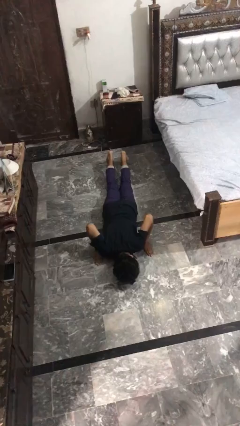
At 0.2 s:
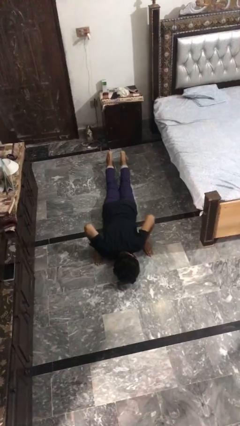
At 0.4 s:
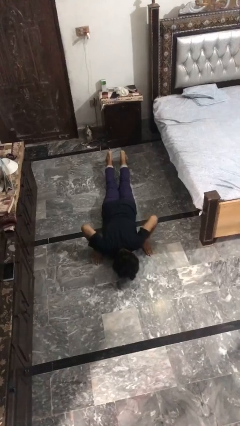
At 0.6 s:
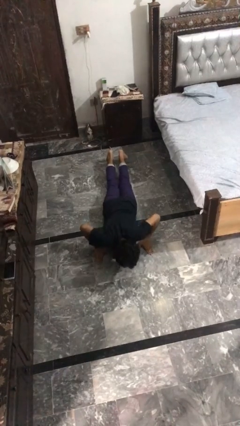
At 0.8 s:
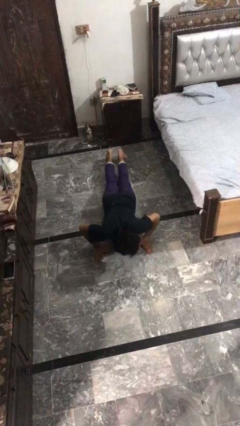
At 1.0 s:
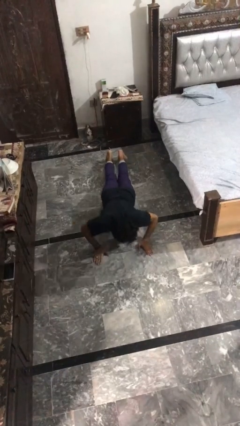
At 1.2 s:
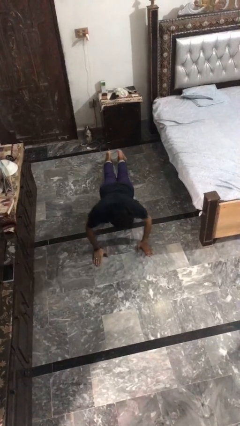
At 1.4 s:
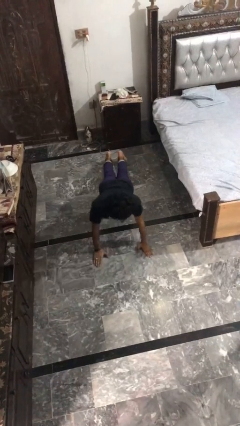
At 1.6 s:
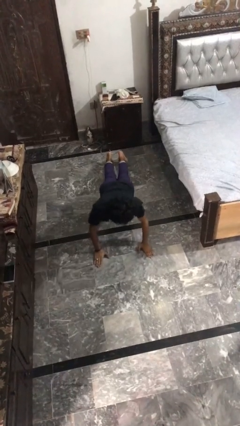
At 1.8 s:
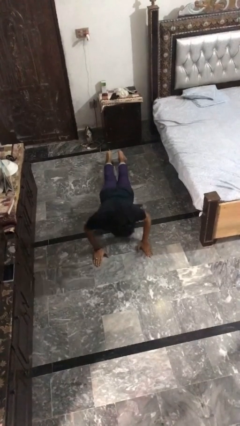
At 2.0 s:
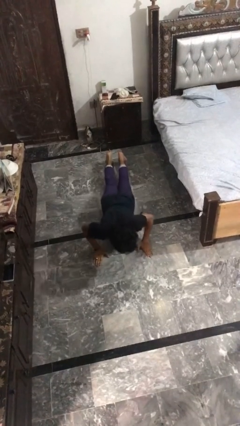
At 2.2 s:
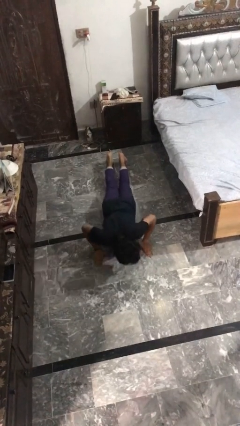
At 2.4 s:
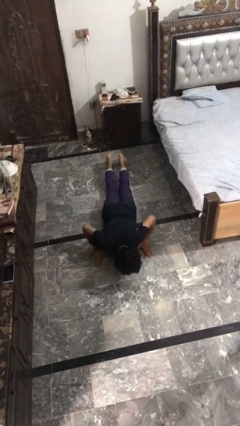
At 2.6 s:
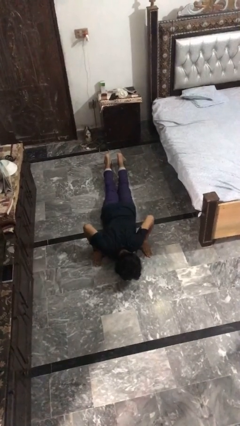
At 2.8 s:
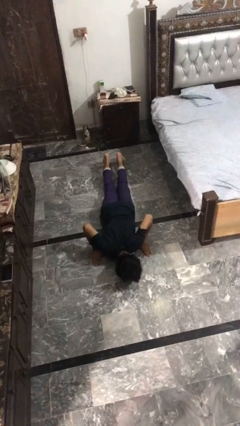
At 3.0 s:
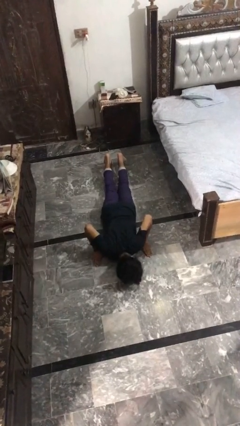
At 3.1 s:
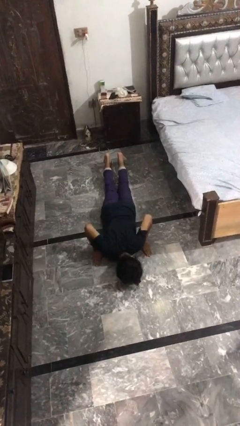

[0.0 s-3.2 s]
person exercises with pushup

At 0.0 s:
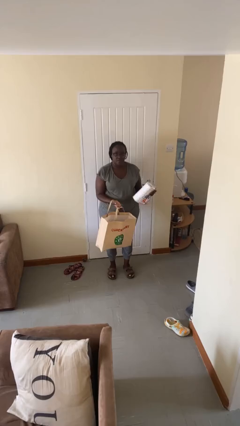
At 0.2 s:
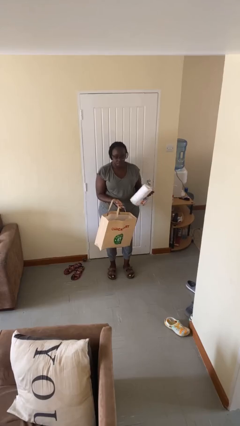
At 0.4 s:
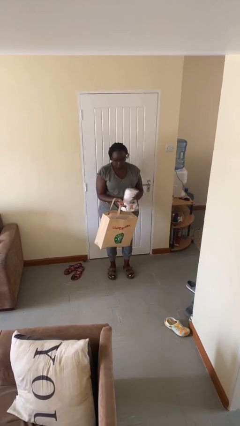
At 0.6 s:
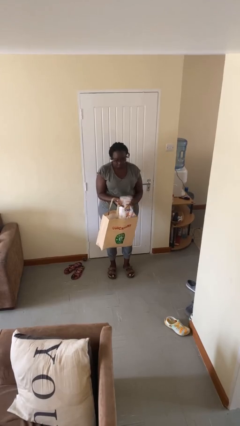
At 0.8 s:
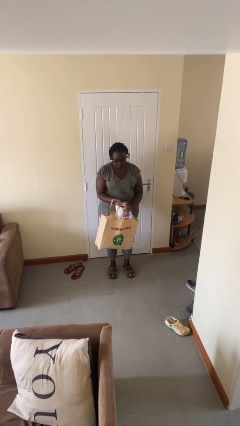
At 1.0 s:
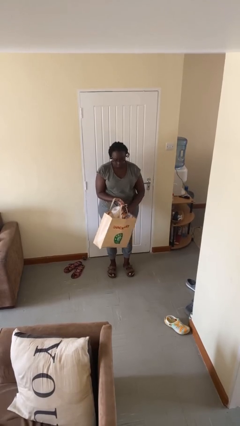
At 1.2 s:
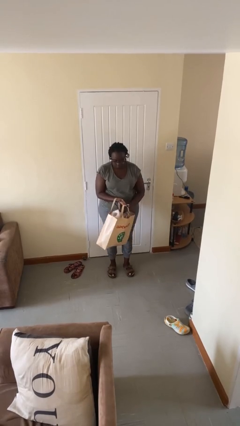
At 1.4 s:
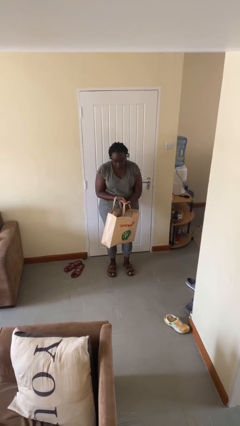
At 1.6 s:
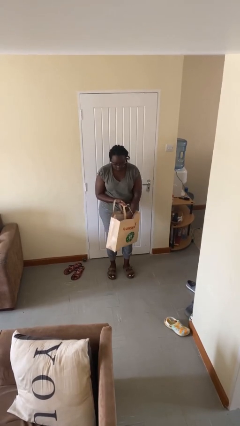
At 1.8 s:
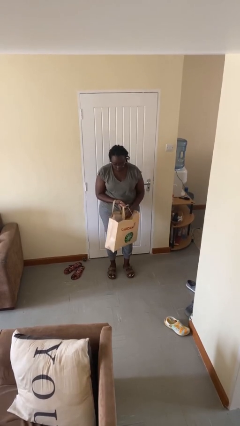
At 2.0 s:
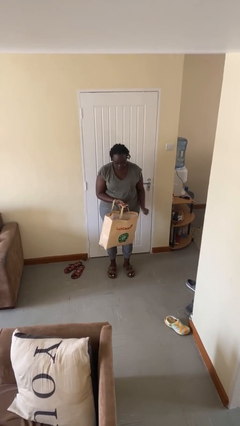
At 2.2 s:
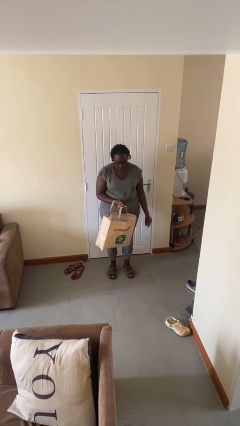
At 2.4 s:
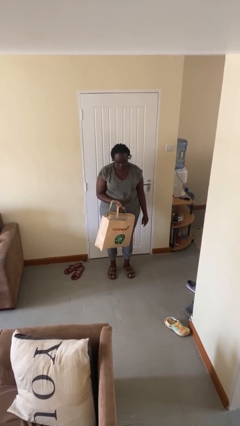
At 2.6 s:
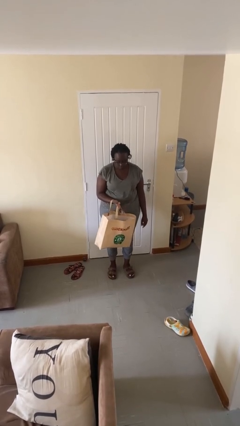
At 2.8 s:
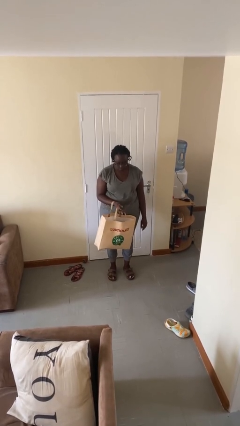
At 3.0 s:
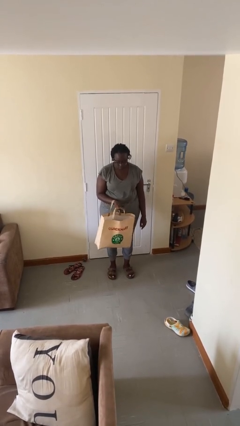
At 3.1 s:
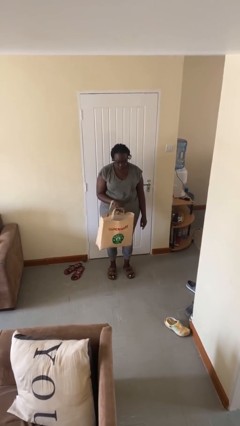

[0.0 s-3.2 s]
person puts object into bag

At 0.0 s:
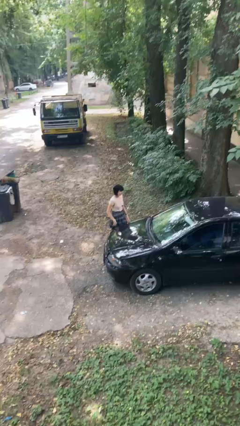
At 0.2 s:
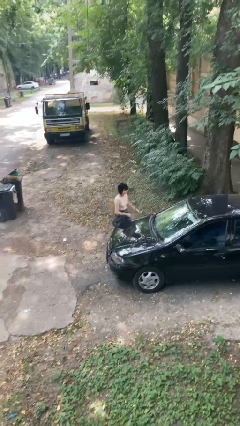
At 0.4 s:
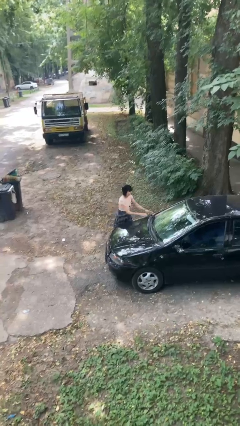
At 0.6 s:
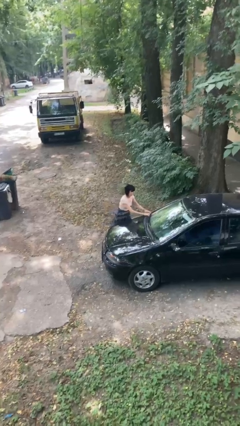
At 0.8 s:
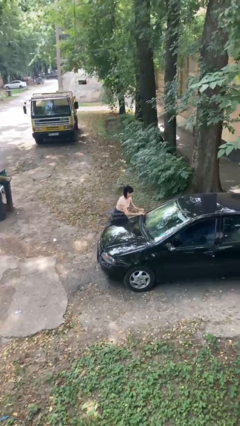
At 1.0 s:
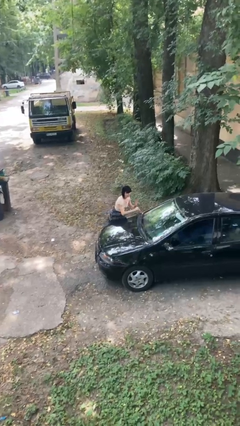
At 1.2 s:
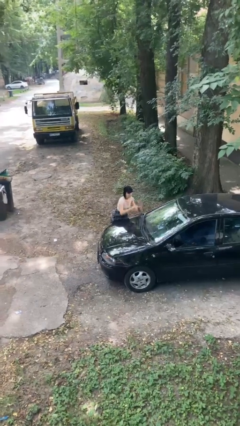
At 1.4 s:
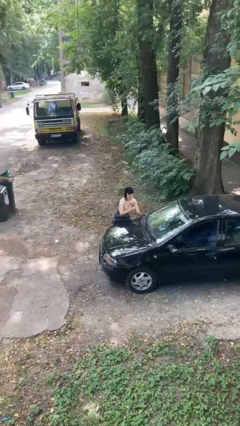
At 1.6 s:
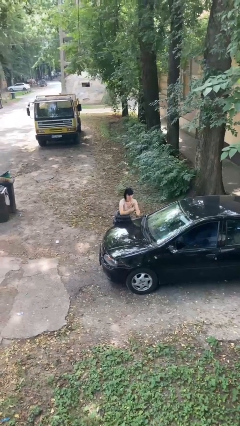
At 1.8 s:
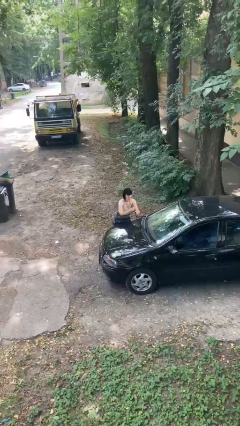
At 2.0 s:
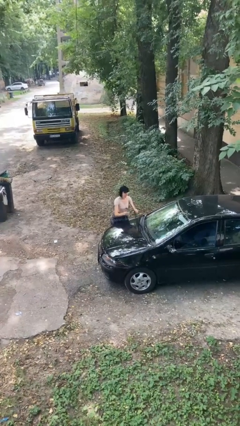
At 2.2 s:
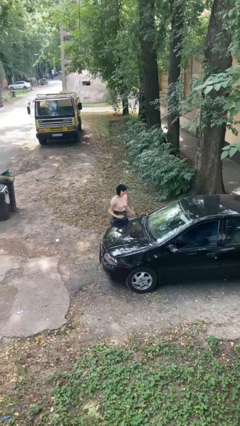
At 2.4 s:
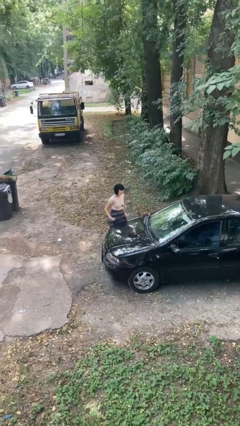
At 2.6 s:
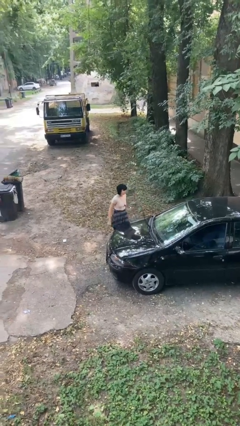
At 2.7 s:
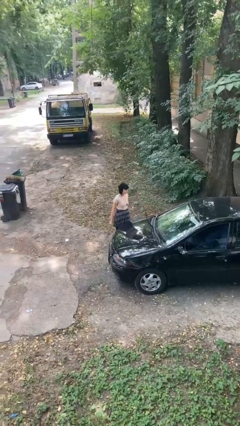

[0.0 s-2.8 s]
person flips up car wipers

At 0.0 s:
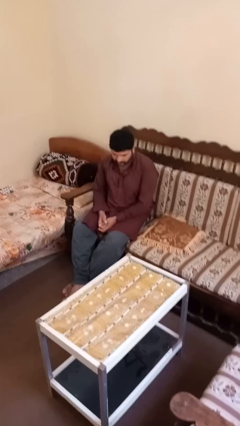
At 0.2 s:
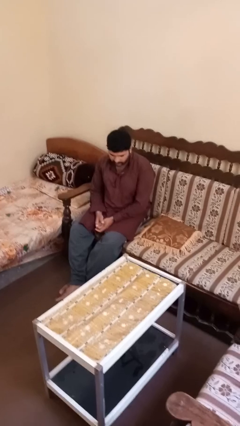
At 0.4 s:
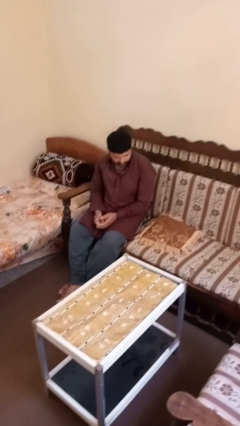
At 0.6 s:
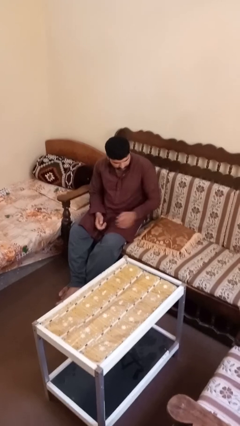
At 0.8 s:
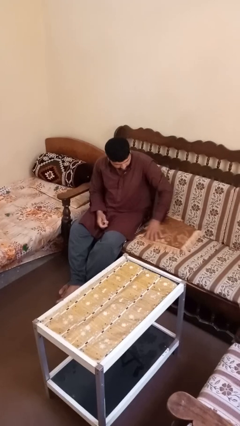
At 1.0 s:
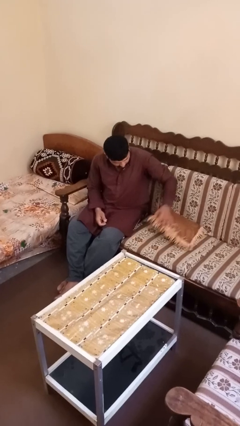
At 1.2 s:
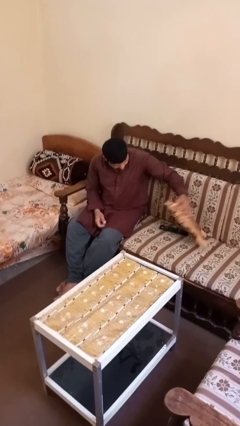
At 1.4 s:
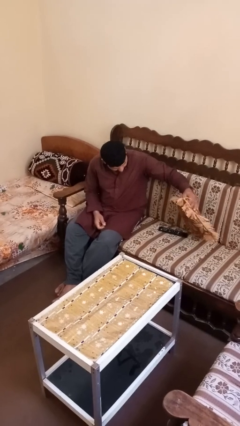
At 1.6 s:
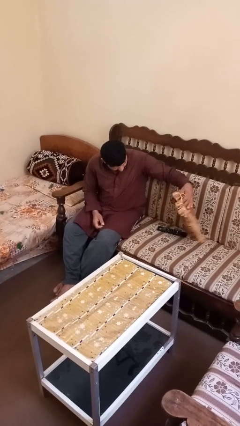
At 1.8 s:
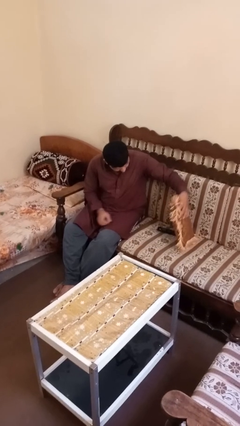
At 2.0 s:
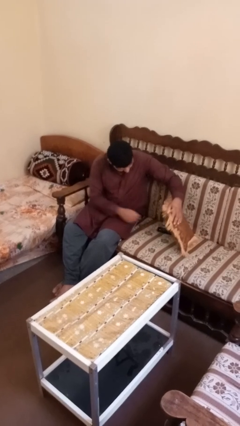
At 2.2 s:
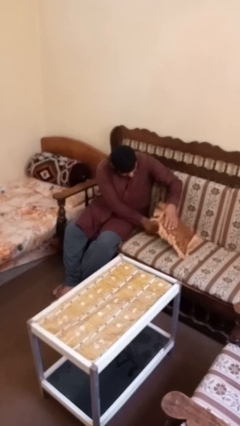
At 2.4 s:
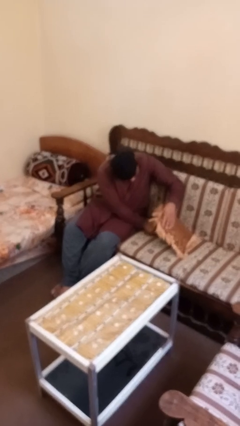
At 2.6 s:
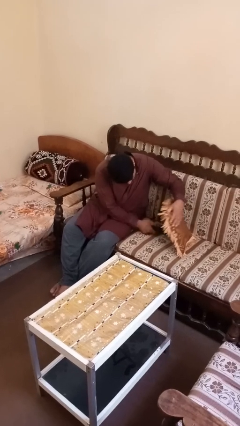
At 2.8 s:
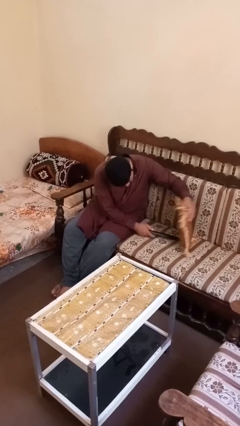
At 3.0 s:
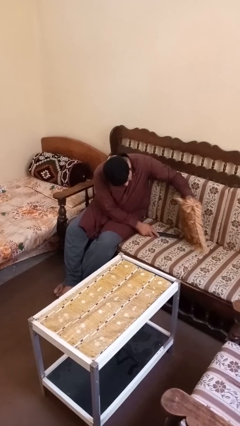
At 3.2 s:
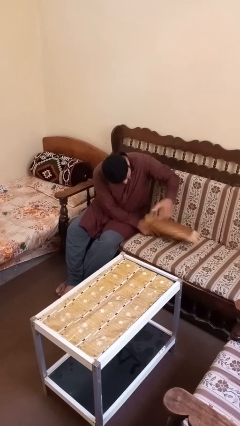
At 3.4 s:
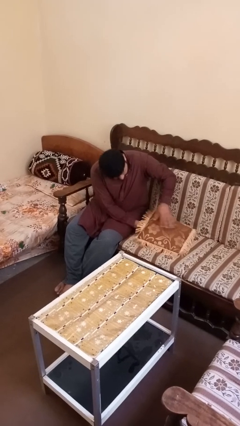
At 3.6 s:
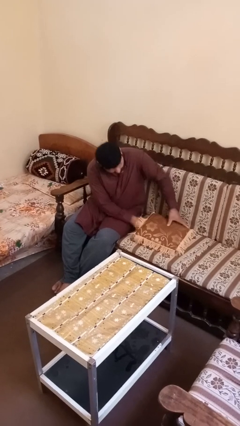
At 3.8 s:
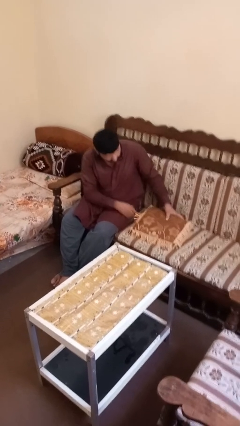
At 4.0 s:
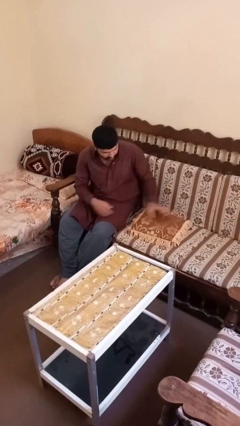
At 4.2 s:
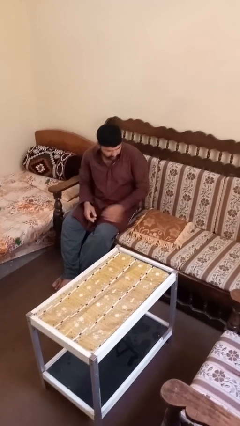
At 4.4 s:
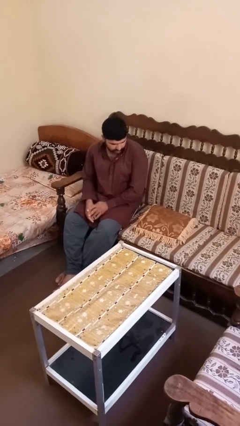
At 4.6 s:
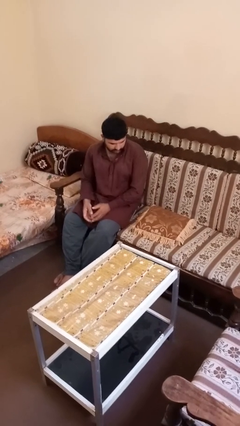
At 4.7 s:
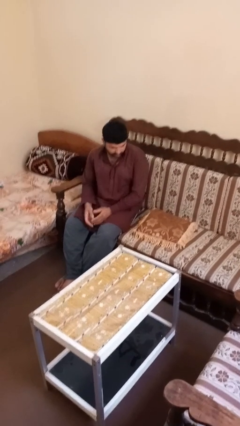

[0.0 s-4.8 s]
person searches in couch

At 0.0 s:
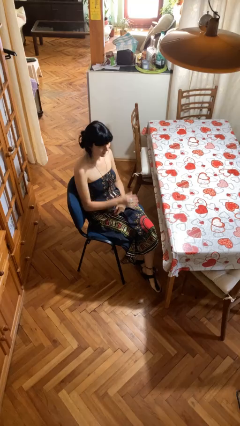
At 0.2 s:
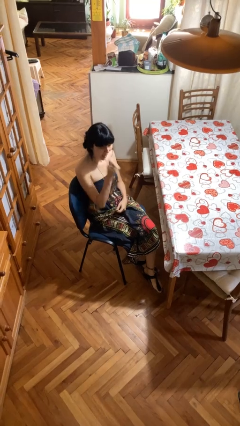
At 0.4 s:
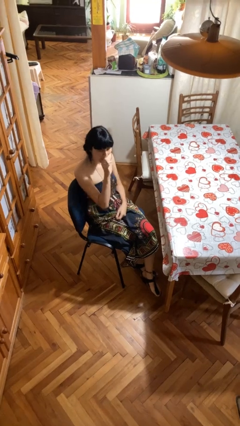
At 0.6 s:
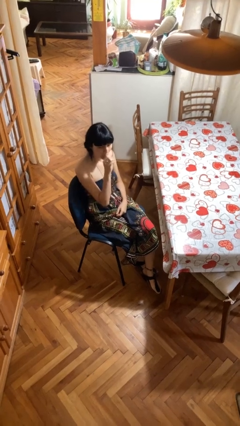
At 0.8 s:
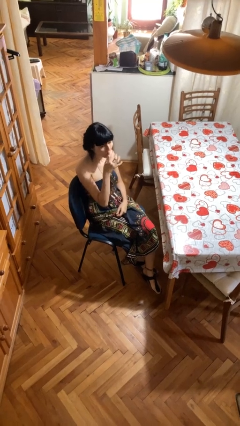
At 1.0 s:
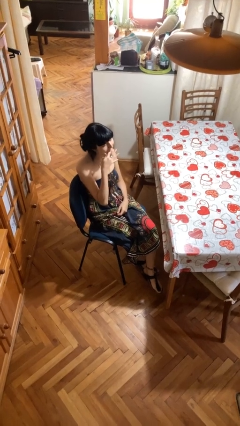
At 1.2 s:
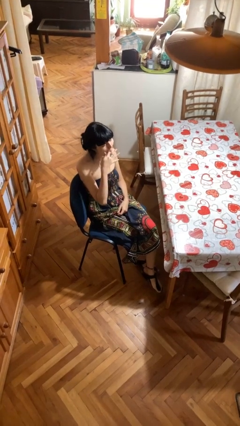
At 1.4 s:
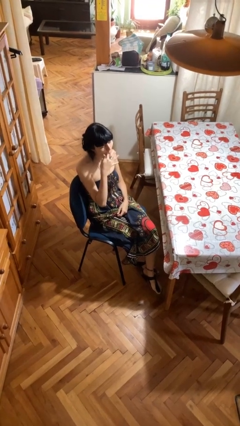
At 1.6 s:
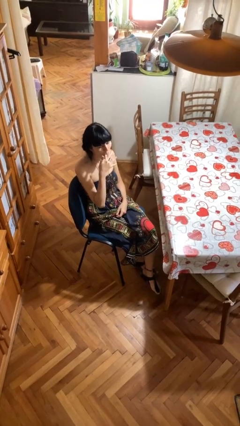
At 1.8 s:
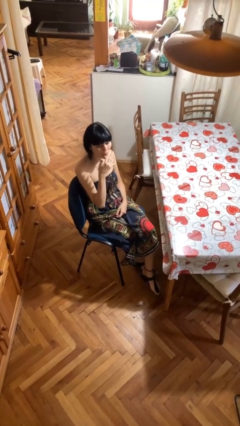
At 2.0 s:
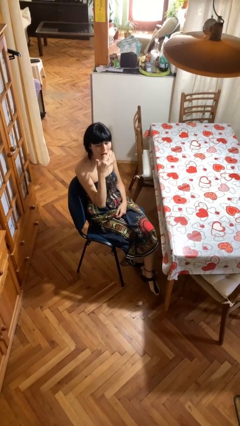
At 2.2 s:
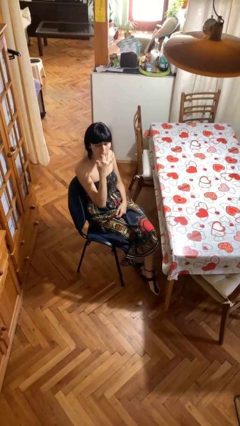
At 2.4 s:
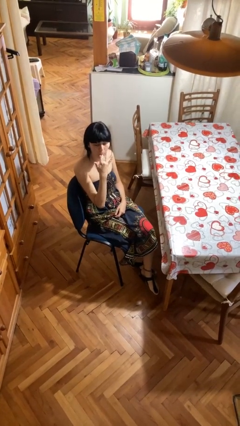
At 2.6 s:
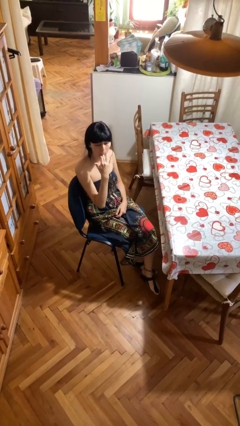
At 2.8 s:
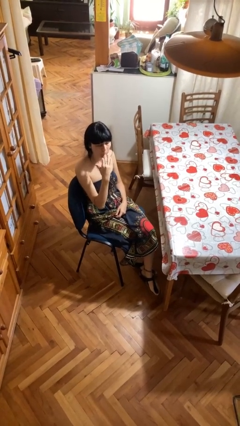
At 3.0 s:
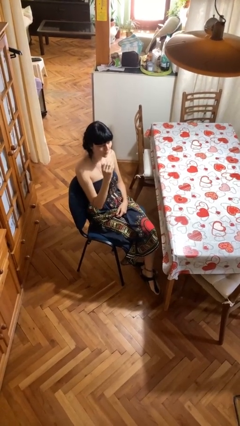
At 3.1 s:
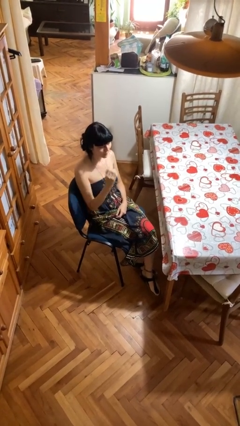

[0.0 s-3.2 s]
person licks fingers
